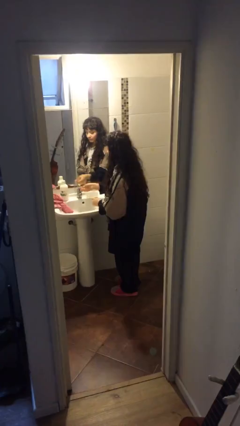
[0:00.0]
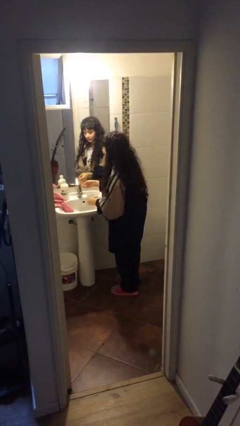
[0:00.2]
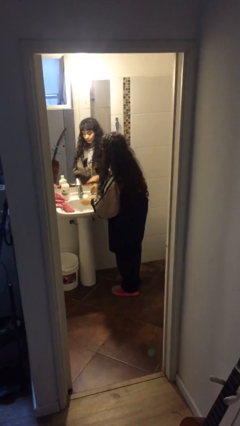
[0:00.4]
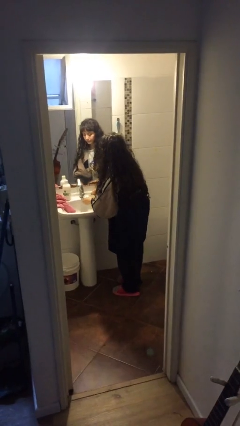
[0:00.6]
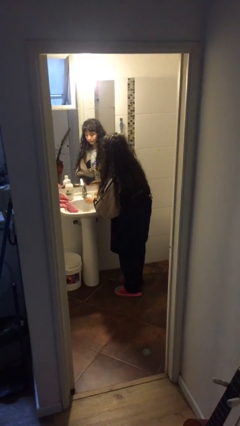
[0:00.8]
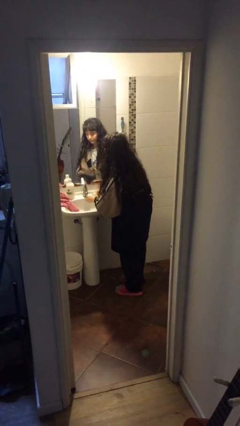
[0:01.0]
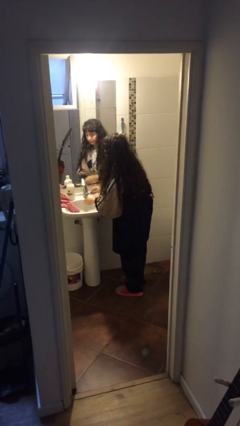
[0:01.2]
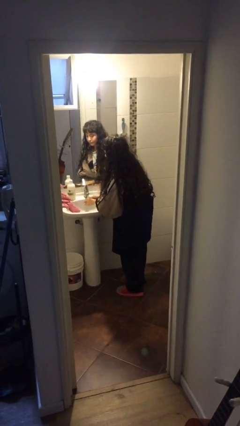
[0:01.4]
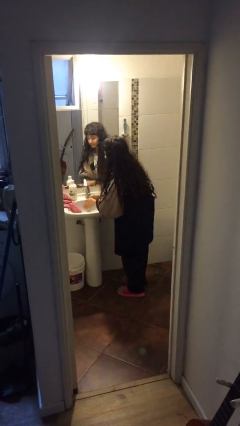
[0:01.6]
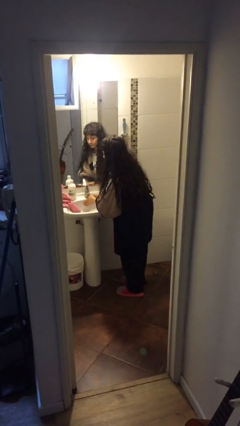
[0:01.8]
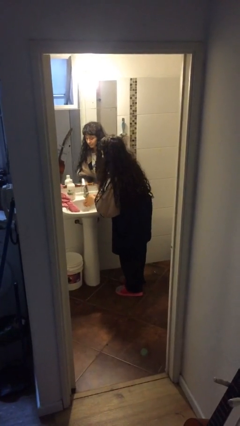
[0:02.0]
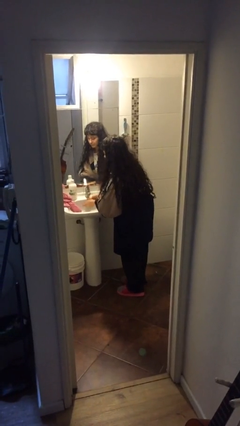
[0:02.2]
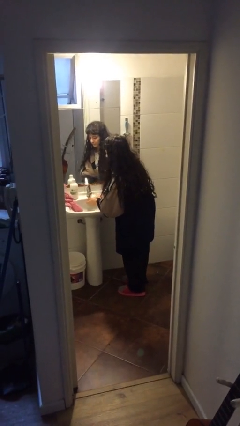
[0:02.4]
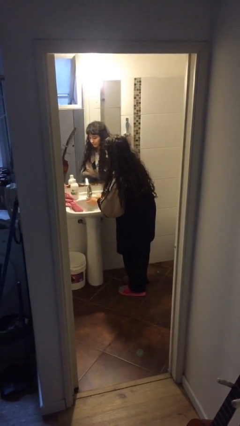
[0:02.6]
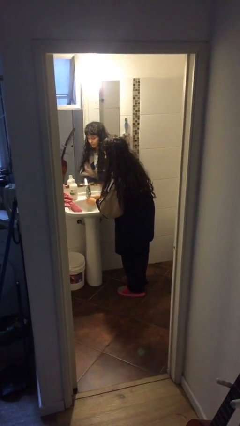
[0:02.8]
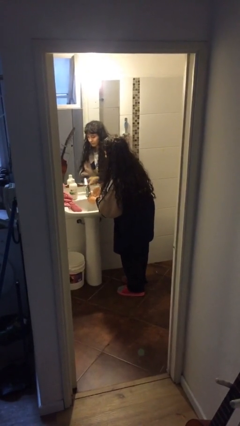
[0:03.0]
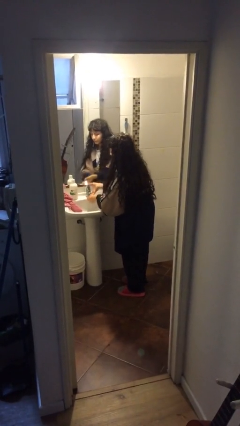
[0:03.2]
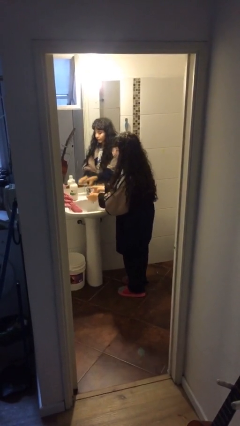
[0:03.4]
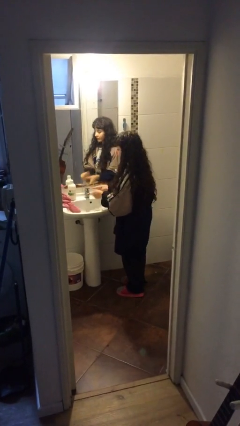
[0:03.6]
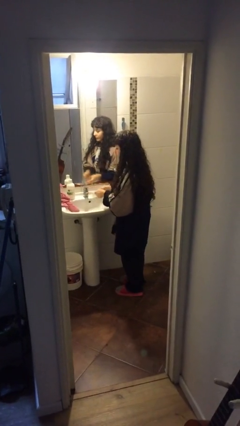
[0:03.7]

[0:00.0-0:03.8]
person washes hands

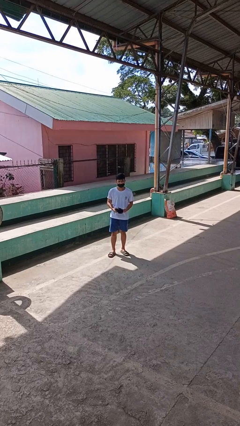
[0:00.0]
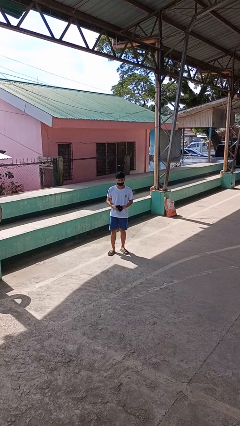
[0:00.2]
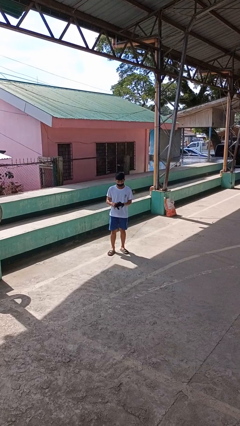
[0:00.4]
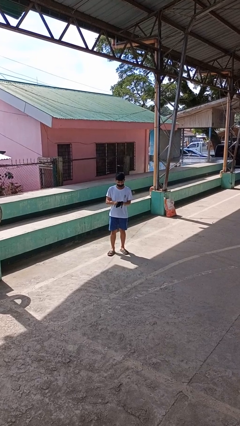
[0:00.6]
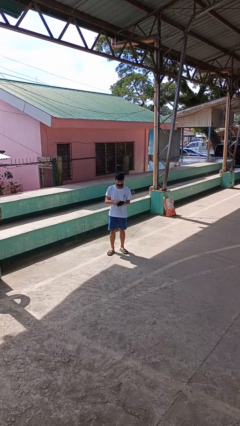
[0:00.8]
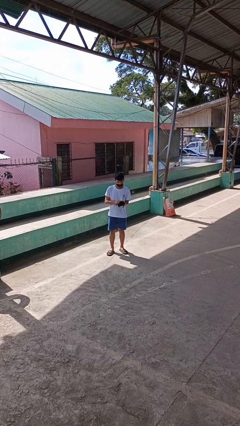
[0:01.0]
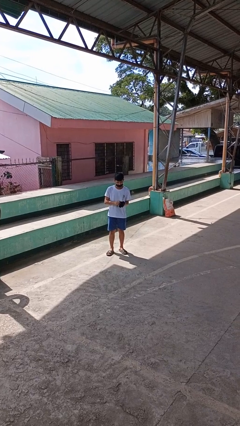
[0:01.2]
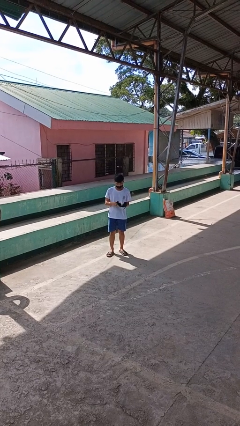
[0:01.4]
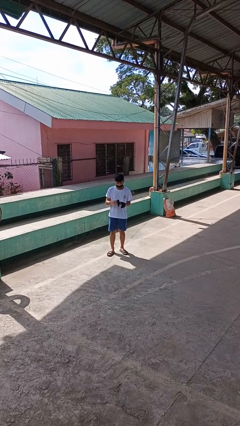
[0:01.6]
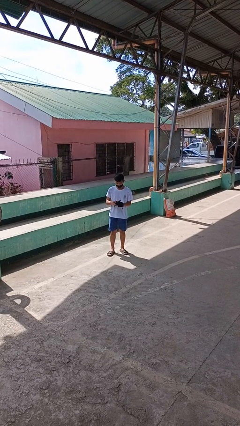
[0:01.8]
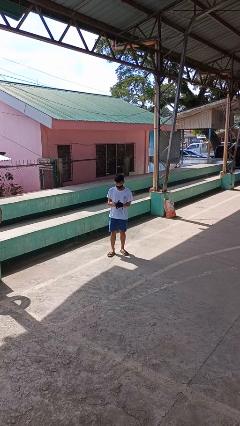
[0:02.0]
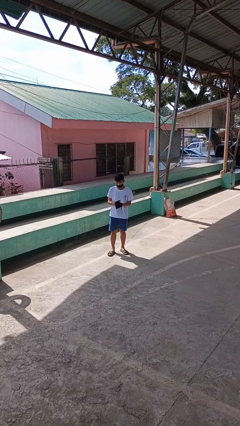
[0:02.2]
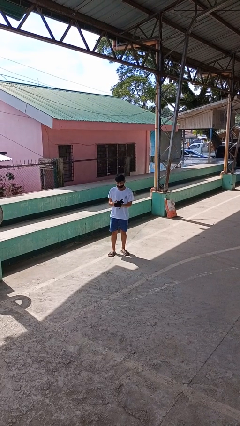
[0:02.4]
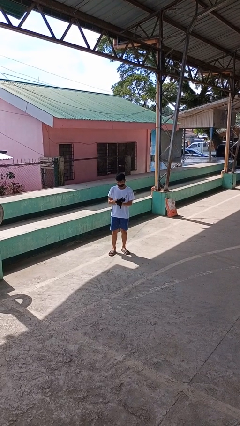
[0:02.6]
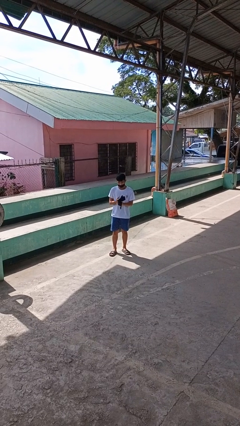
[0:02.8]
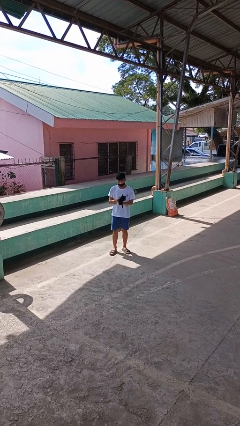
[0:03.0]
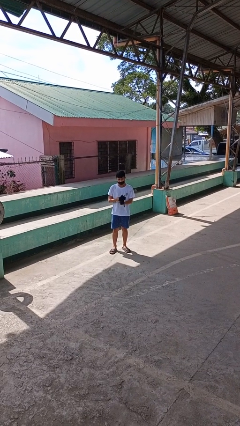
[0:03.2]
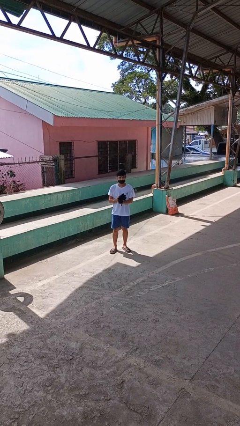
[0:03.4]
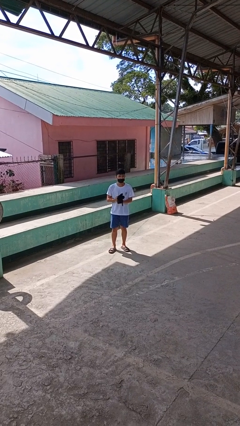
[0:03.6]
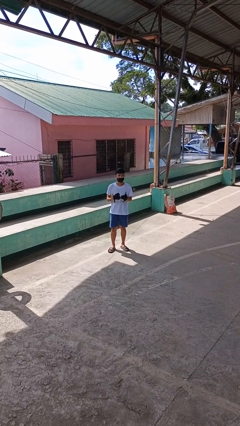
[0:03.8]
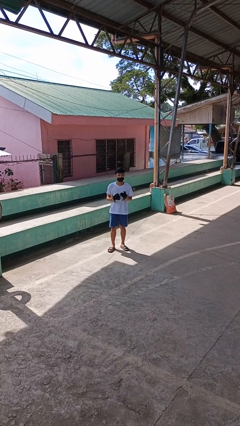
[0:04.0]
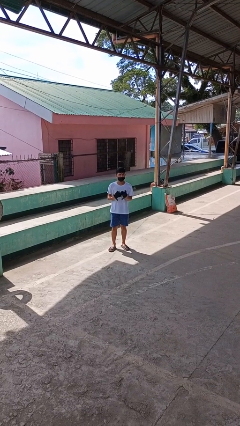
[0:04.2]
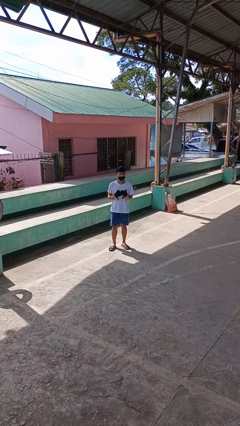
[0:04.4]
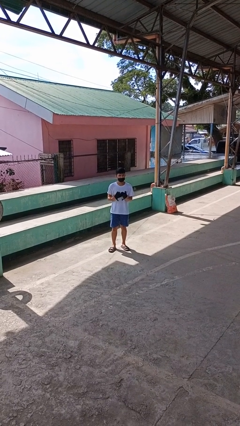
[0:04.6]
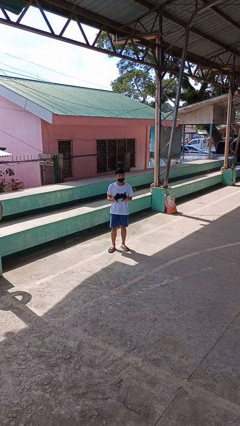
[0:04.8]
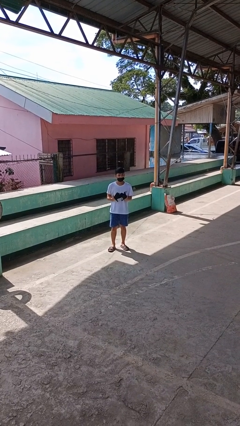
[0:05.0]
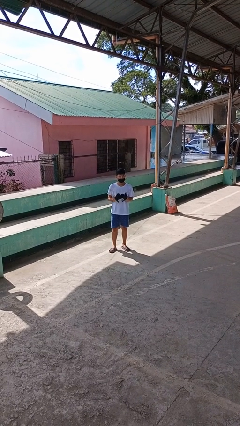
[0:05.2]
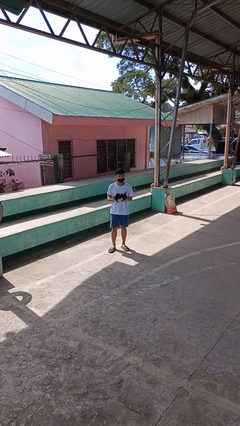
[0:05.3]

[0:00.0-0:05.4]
person puts on gloves

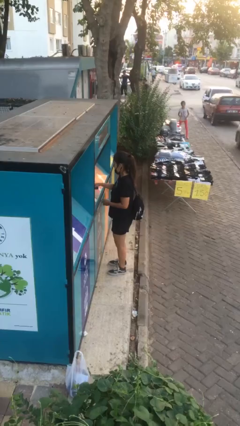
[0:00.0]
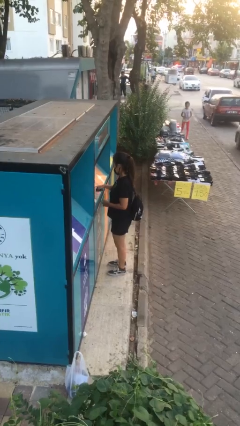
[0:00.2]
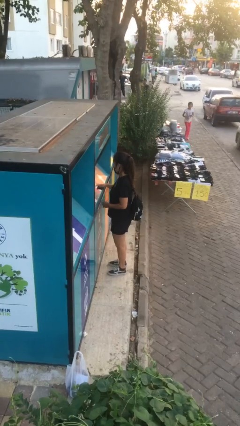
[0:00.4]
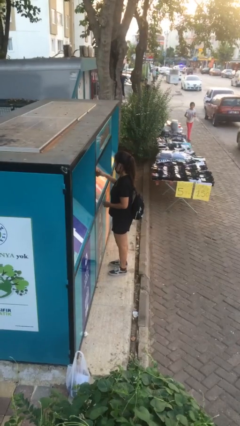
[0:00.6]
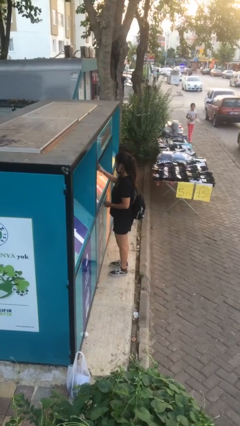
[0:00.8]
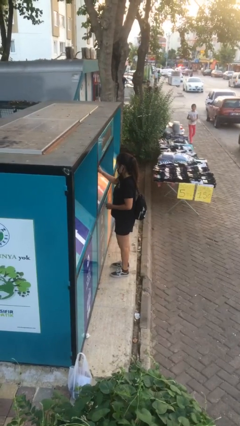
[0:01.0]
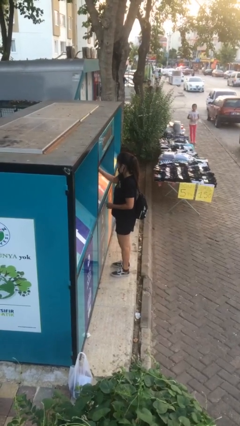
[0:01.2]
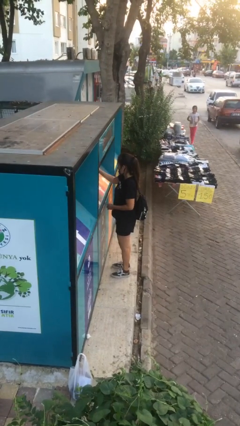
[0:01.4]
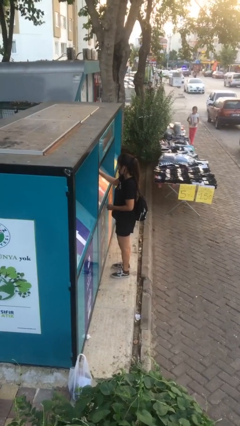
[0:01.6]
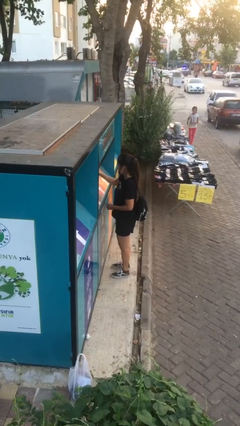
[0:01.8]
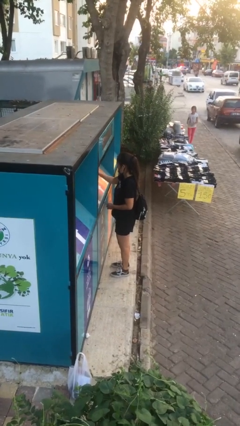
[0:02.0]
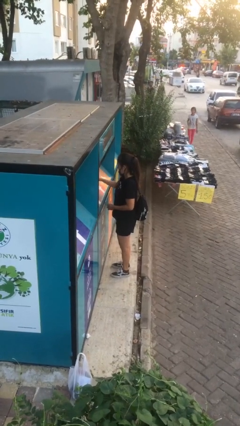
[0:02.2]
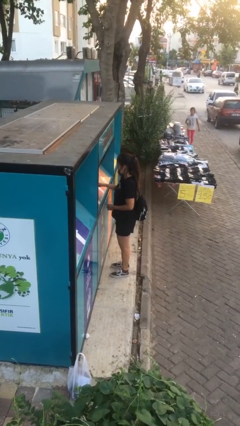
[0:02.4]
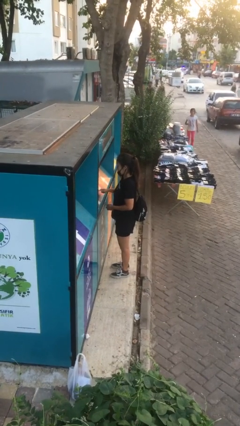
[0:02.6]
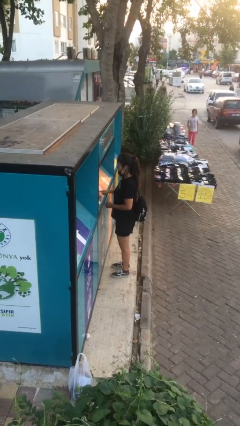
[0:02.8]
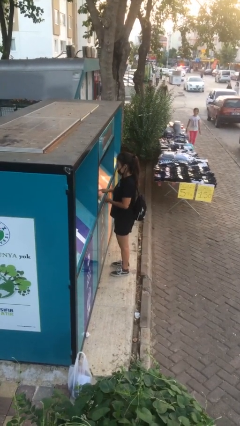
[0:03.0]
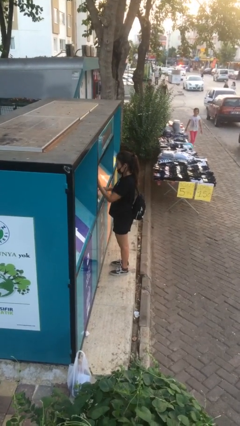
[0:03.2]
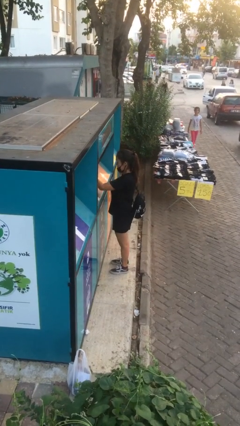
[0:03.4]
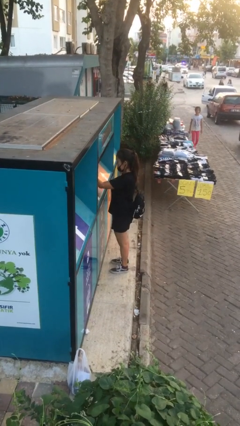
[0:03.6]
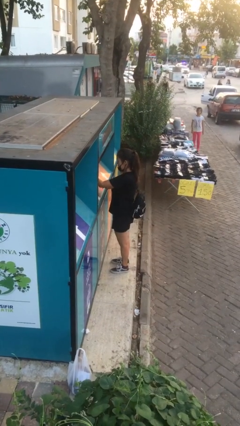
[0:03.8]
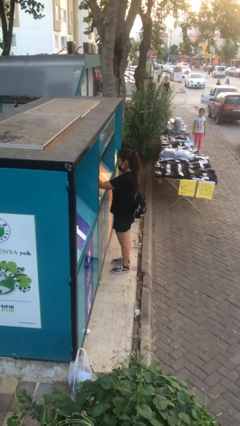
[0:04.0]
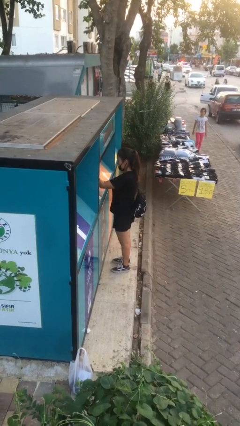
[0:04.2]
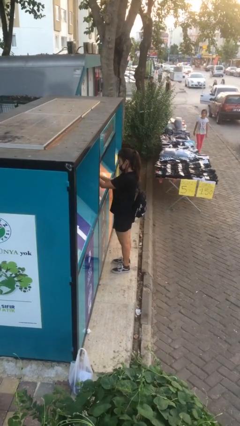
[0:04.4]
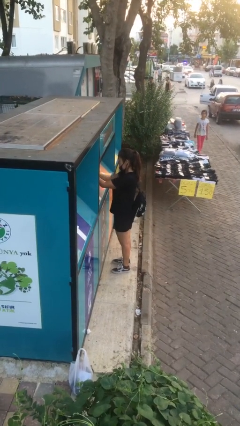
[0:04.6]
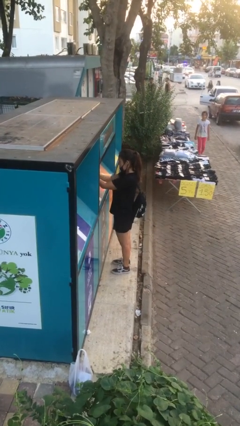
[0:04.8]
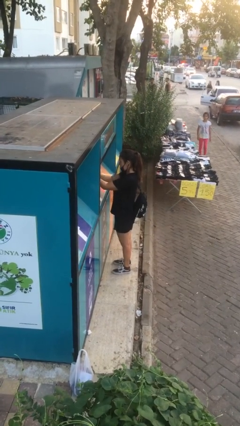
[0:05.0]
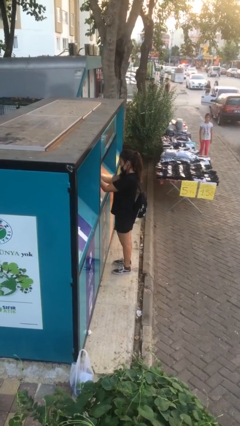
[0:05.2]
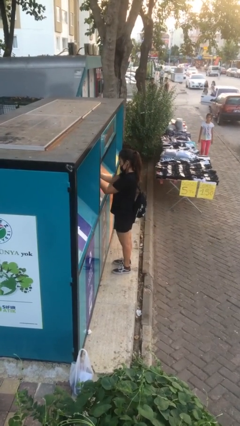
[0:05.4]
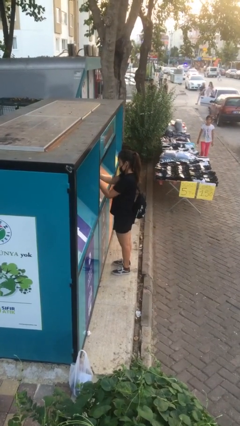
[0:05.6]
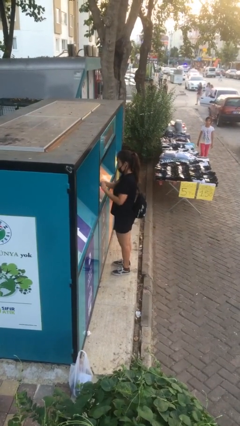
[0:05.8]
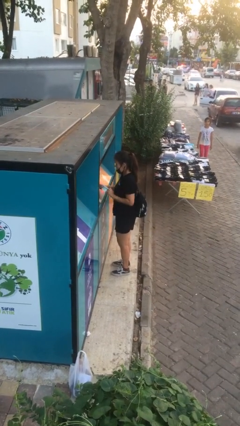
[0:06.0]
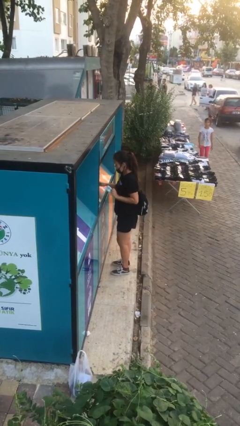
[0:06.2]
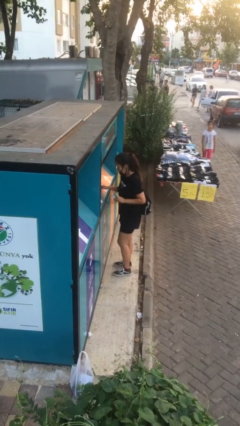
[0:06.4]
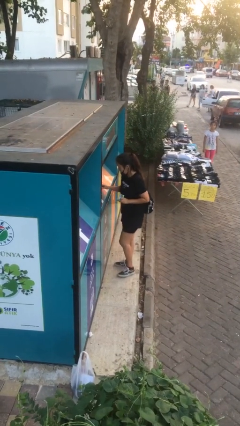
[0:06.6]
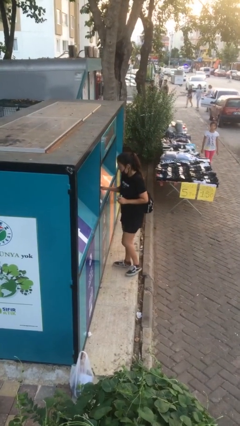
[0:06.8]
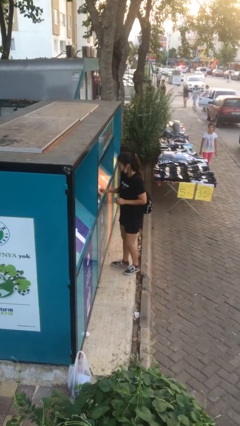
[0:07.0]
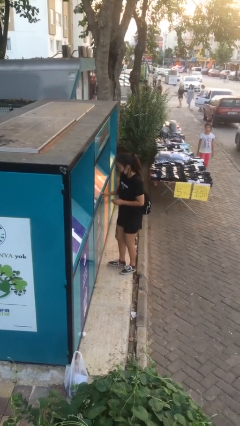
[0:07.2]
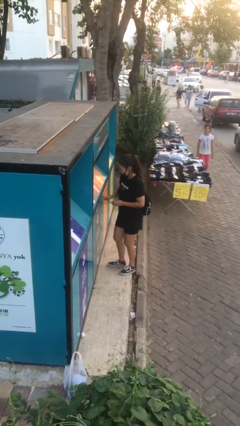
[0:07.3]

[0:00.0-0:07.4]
person purchases from machine

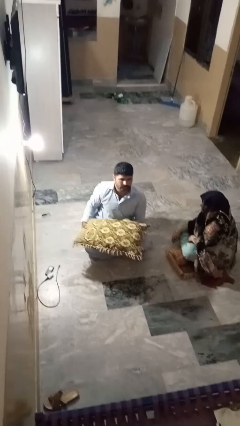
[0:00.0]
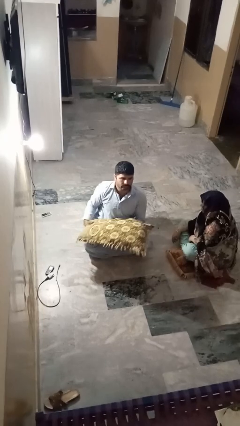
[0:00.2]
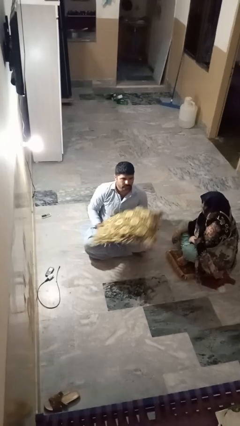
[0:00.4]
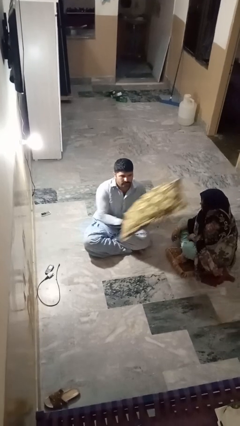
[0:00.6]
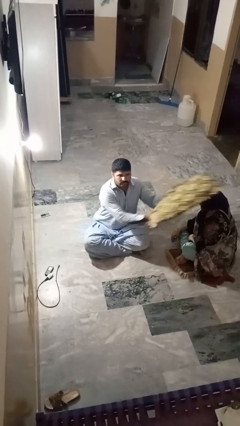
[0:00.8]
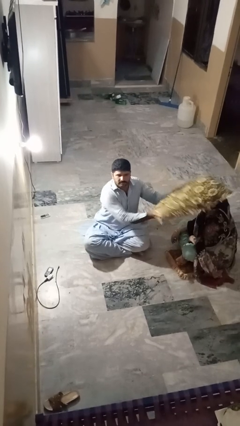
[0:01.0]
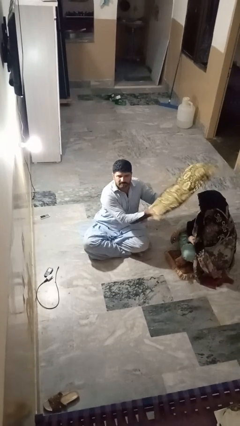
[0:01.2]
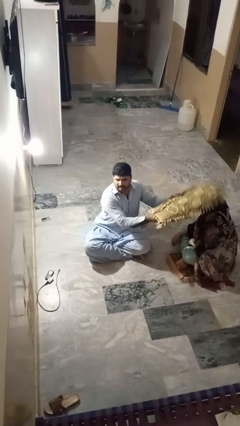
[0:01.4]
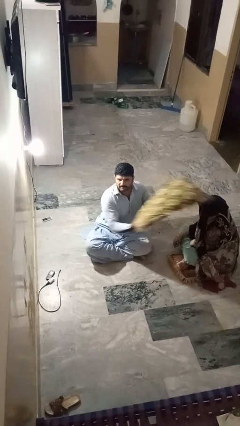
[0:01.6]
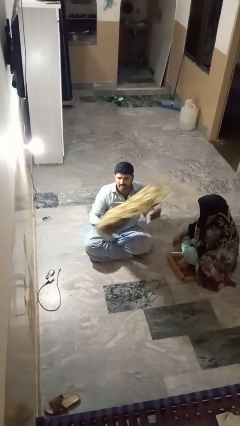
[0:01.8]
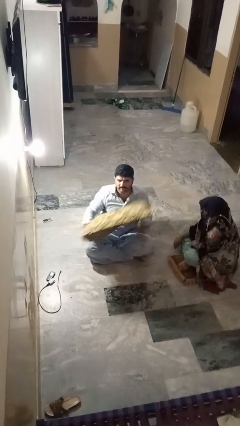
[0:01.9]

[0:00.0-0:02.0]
person hits person with pillow
